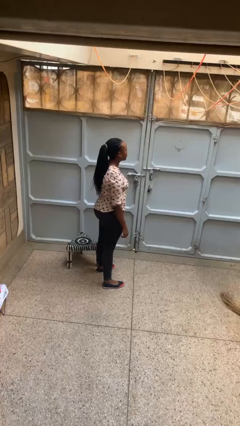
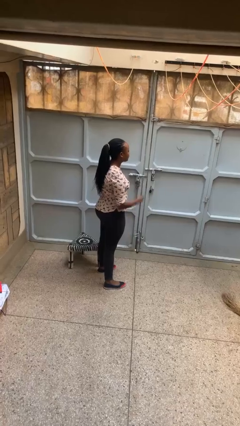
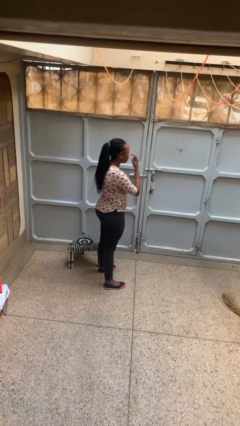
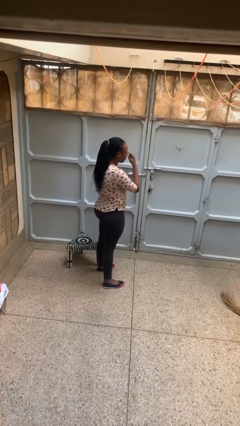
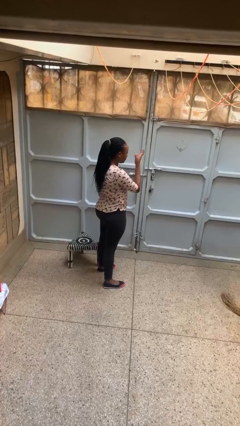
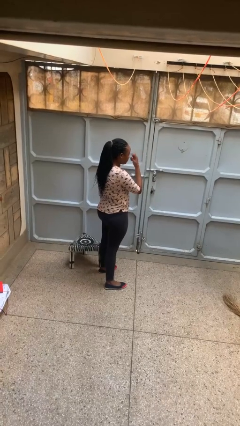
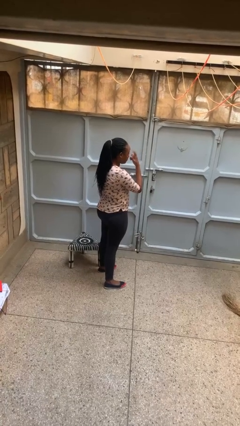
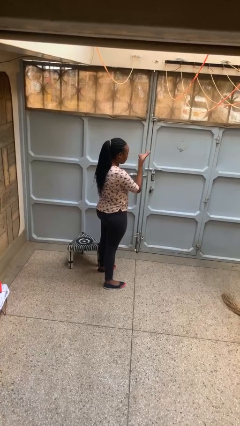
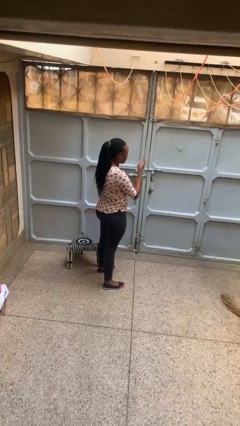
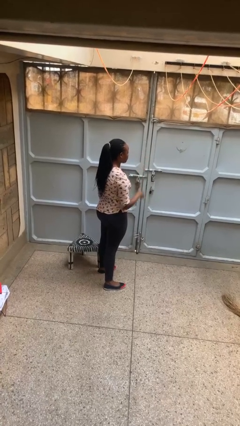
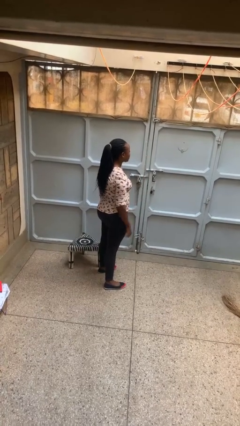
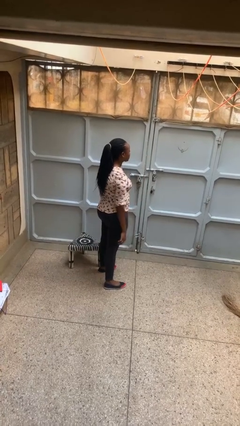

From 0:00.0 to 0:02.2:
person gestures watch closely

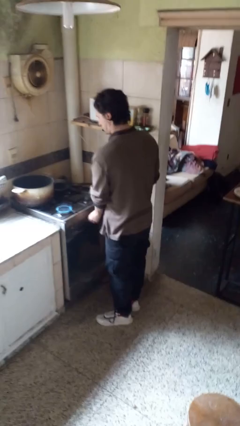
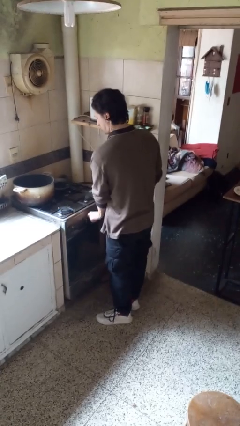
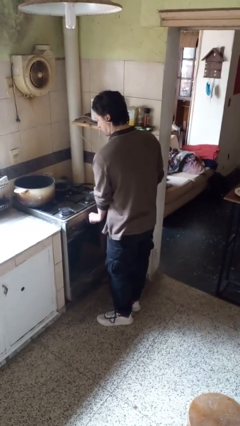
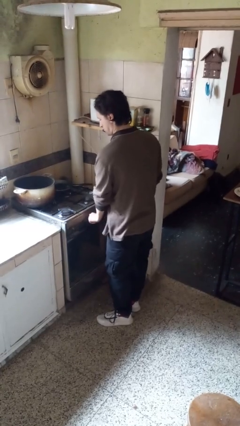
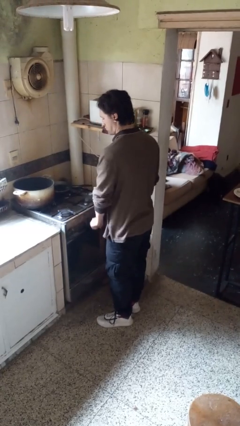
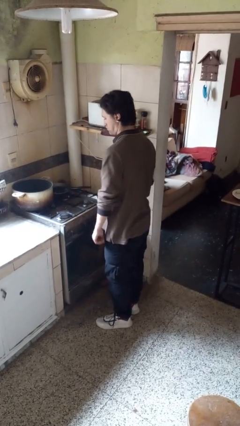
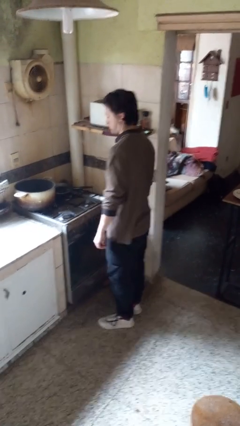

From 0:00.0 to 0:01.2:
person turns off stovetop

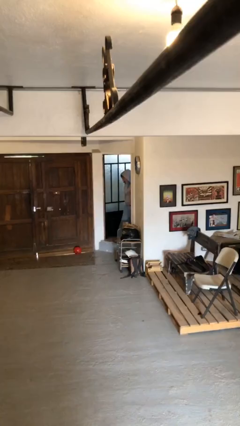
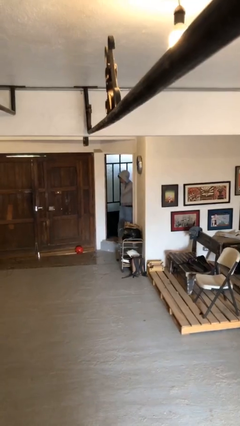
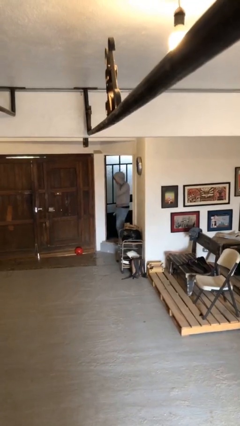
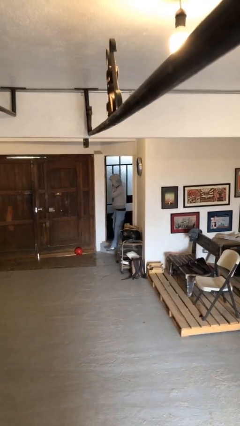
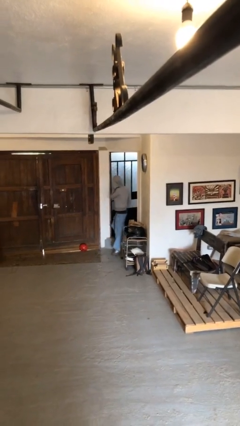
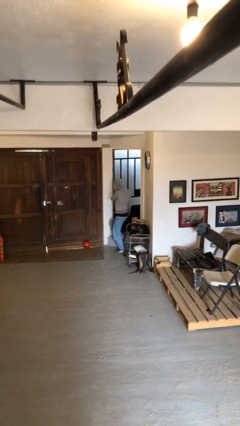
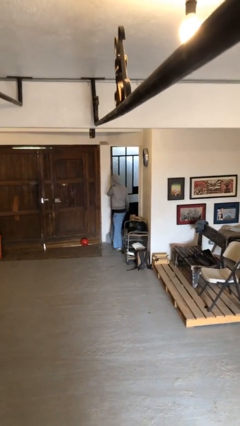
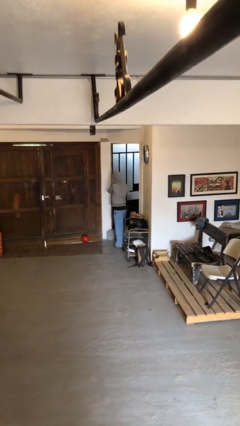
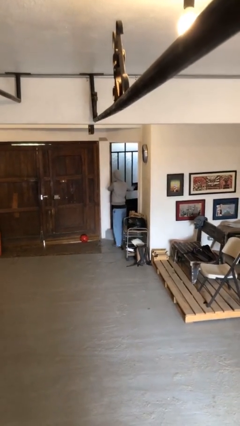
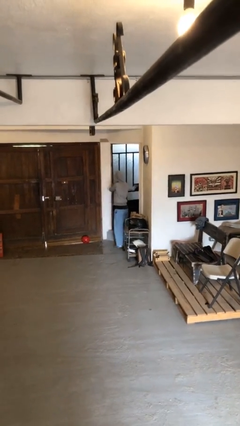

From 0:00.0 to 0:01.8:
person enters scene through structure

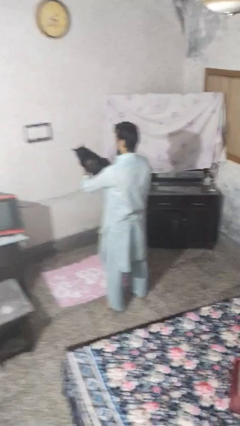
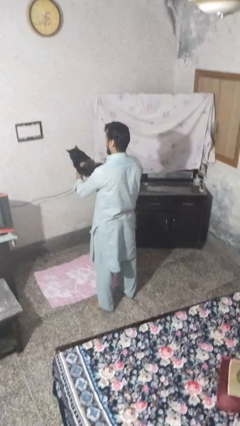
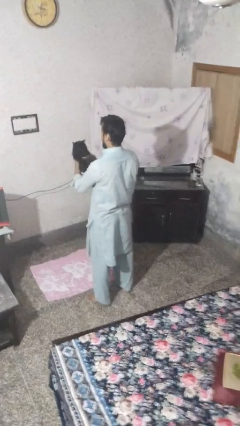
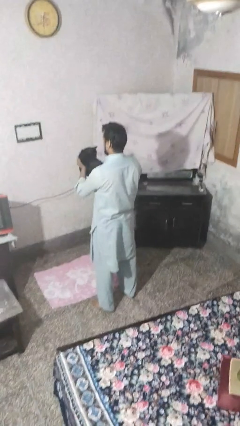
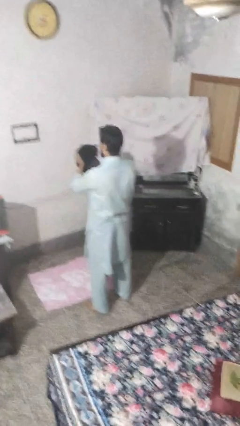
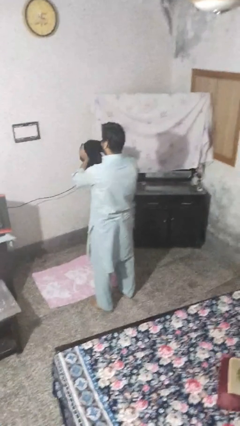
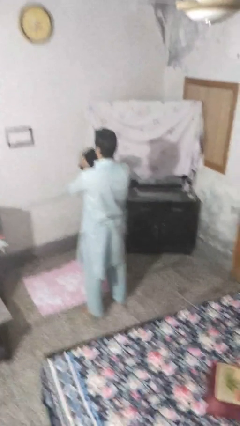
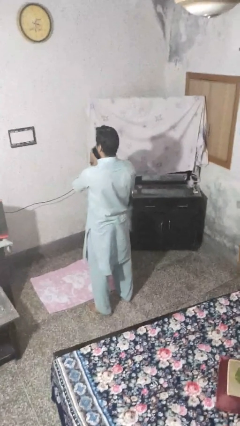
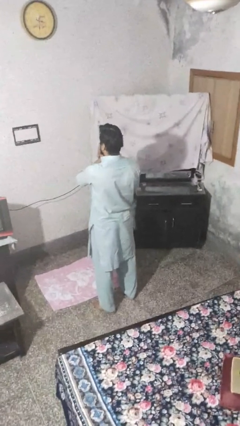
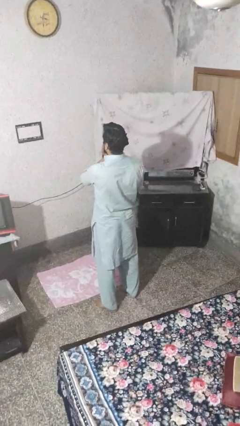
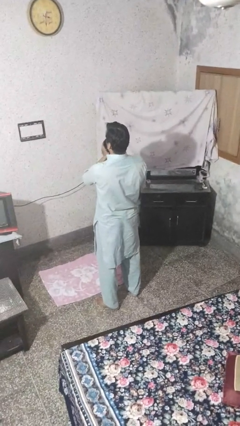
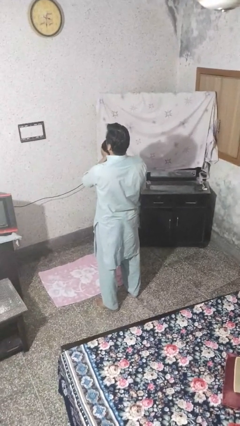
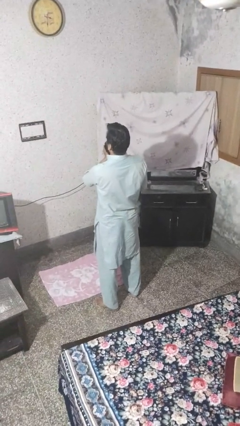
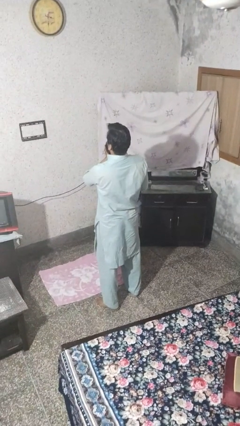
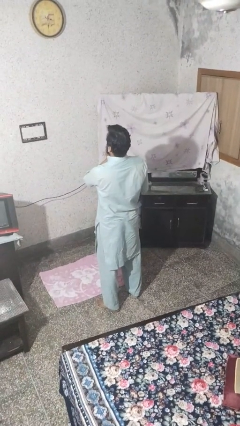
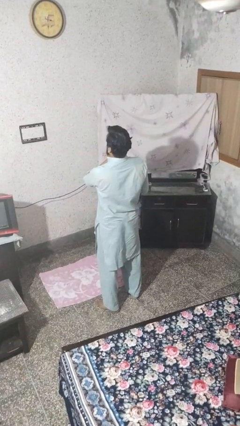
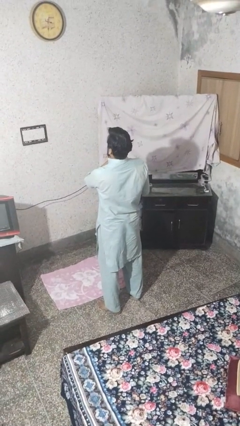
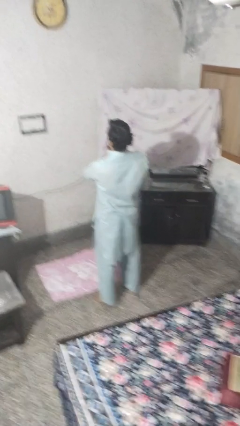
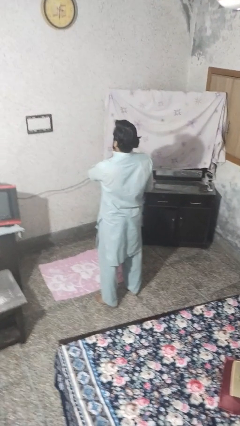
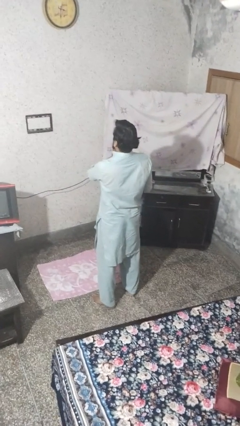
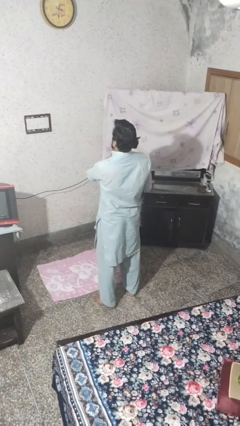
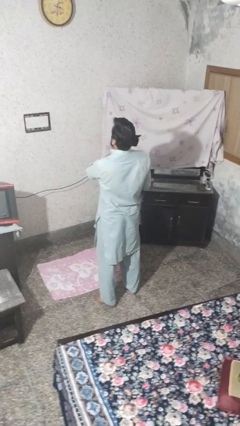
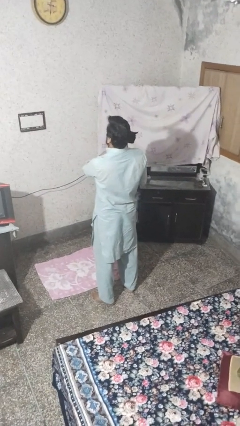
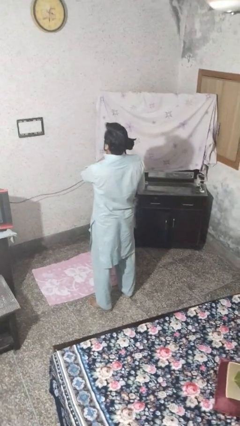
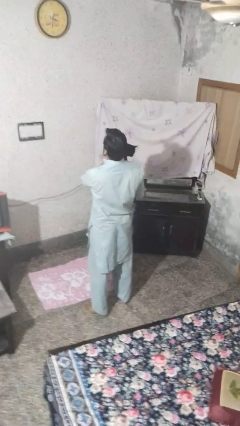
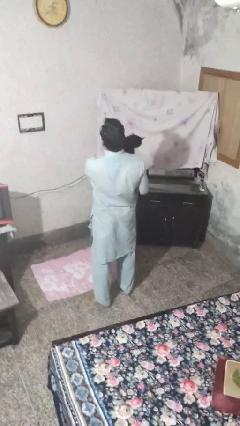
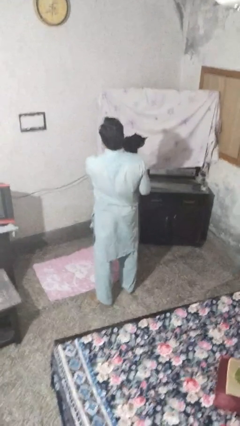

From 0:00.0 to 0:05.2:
person hugs cat

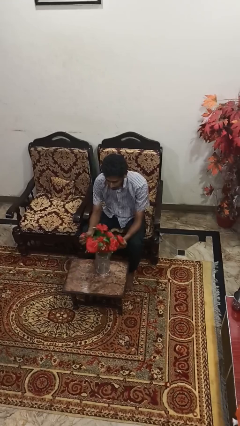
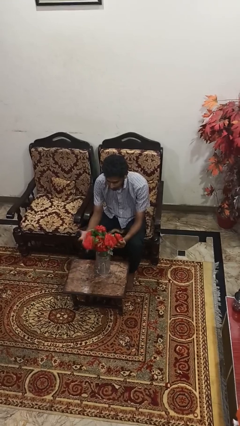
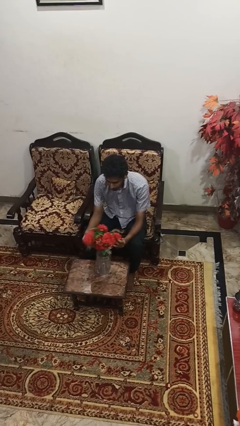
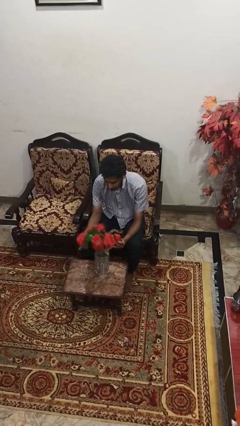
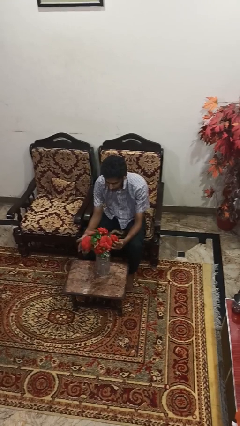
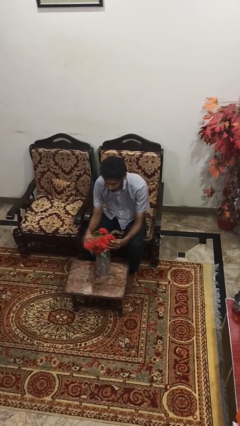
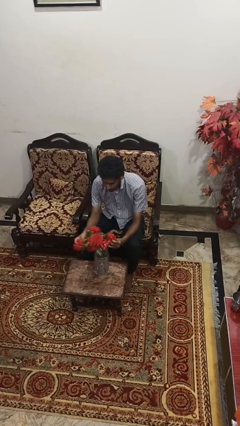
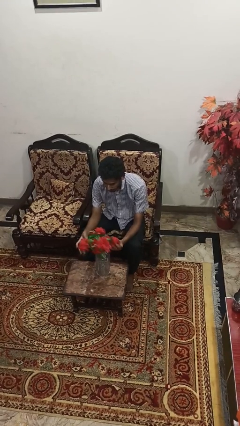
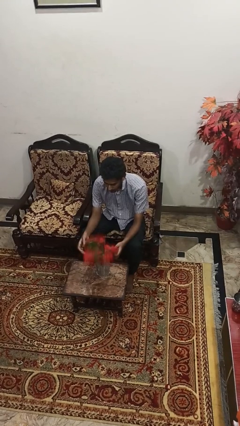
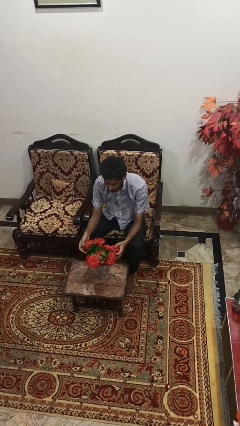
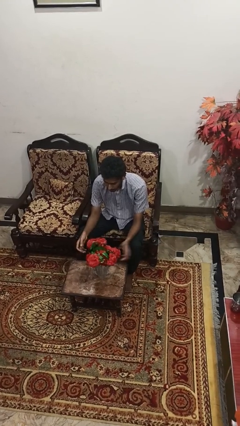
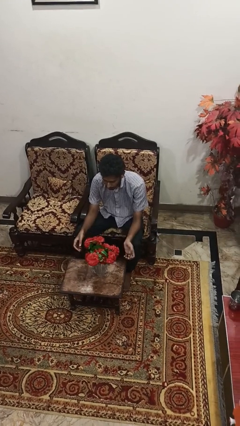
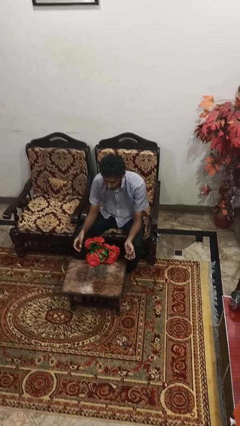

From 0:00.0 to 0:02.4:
person arranges flowers in vase

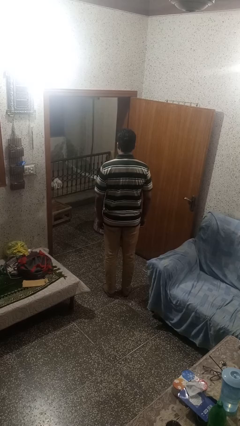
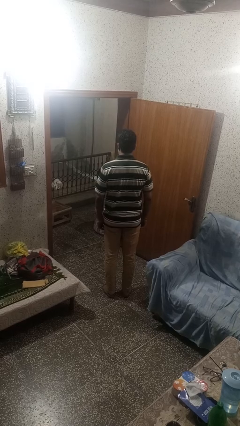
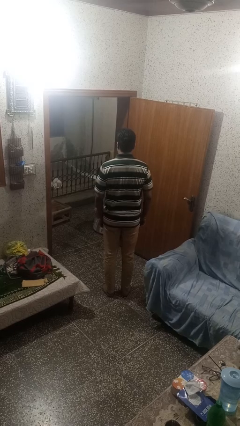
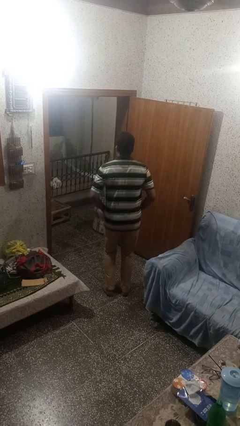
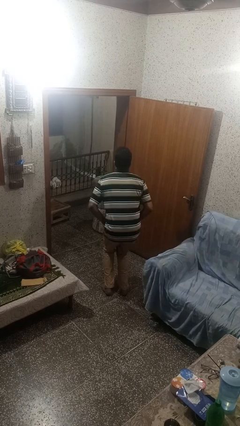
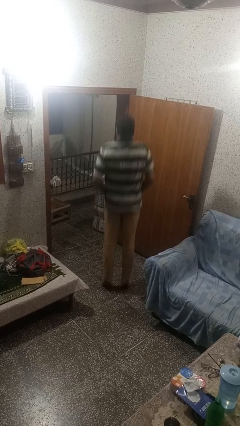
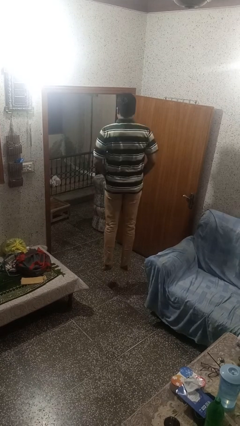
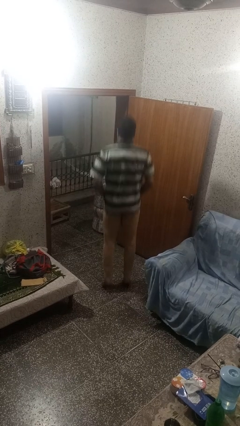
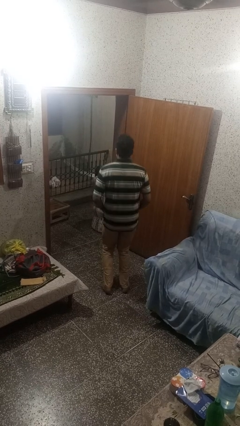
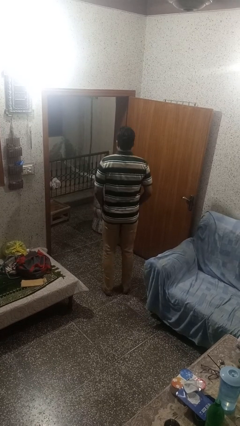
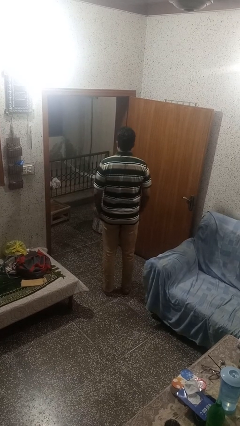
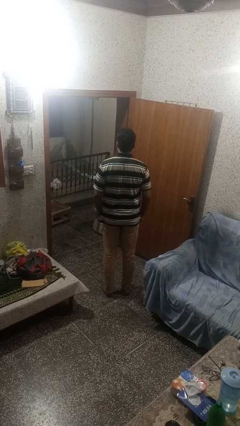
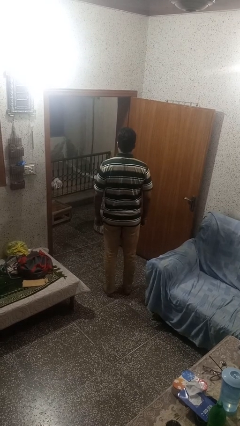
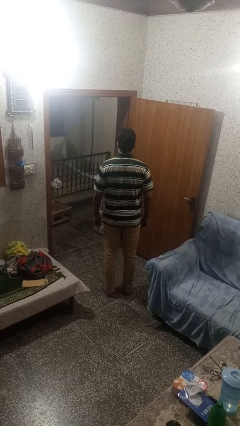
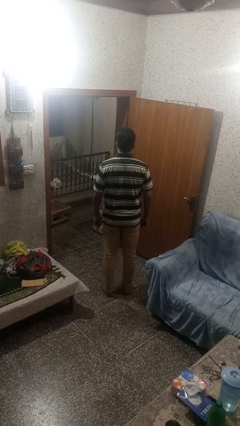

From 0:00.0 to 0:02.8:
person jumps

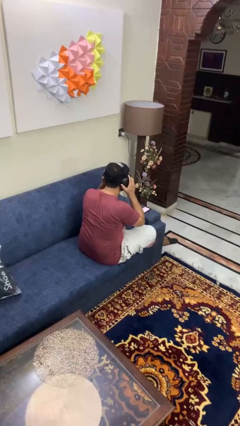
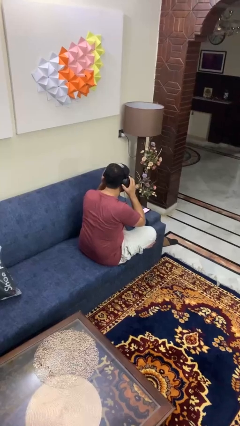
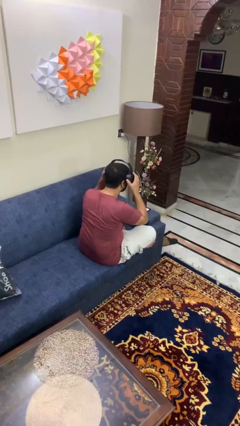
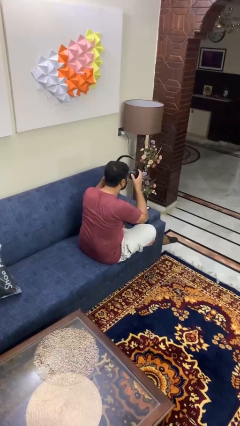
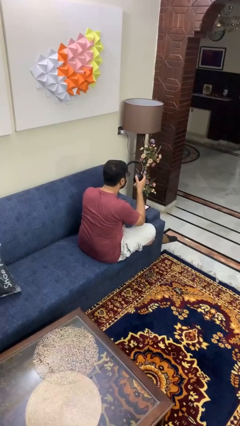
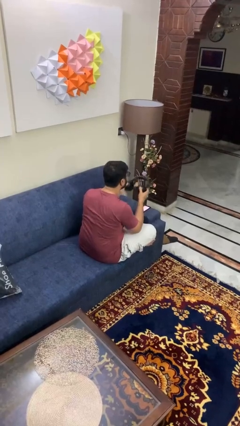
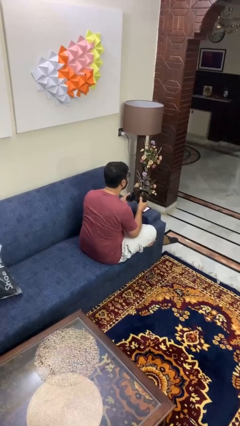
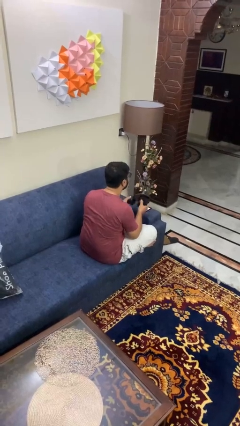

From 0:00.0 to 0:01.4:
person takes off headphones
